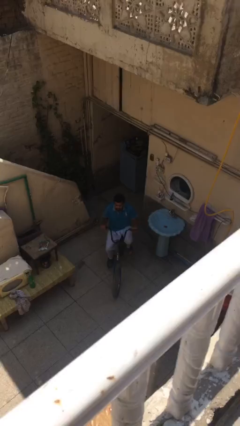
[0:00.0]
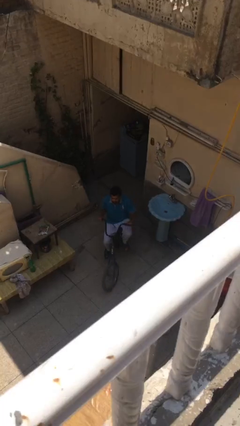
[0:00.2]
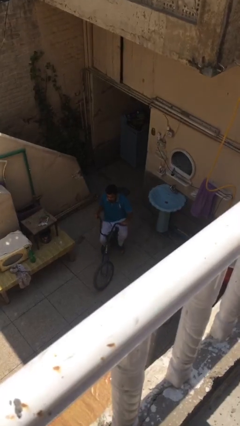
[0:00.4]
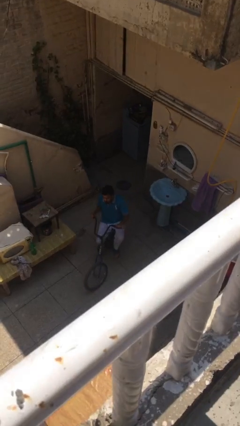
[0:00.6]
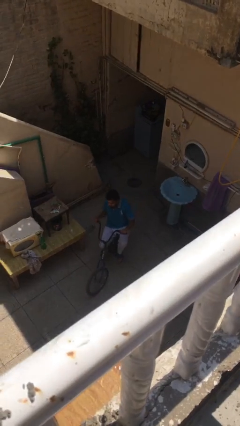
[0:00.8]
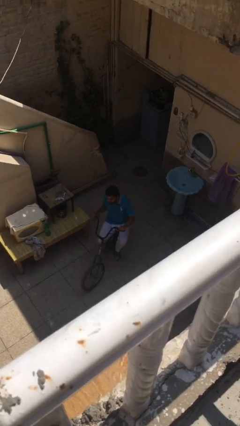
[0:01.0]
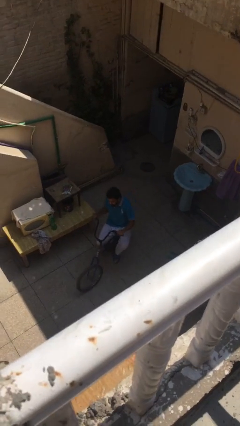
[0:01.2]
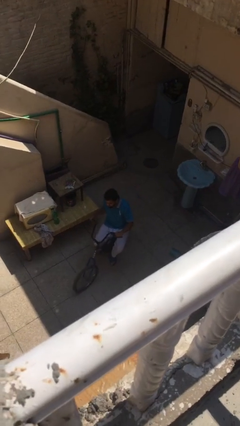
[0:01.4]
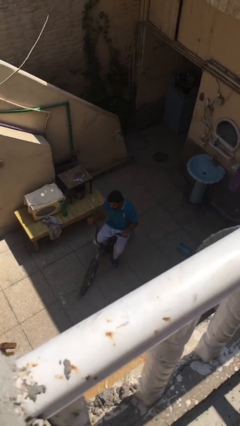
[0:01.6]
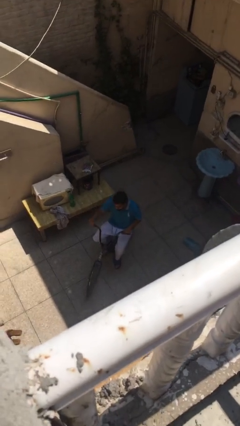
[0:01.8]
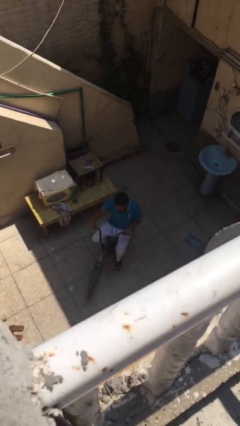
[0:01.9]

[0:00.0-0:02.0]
person rides bicycle

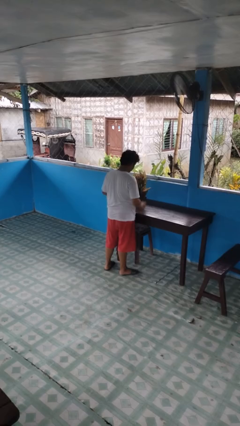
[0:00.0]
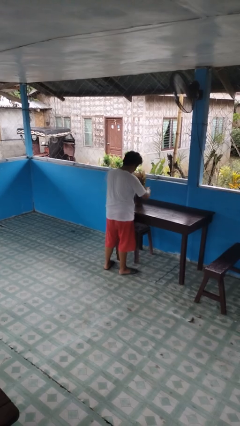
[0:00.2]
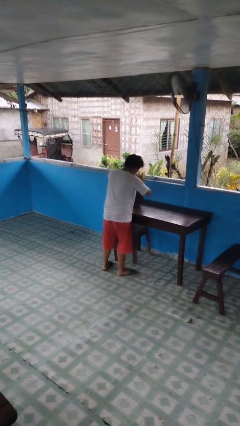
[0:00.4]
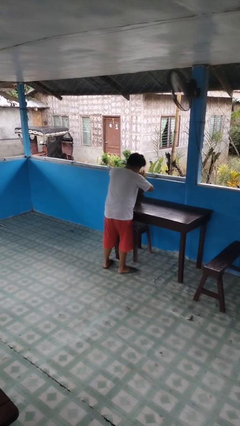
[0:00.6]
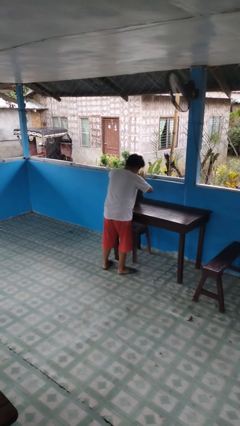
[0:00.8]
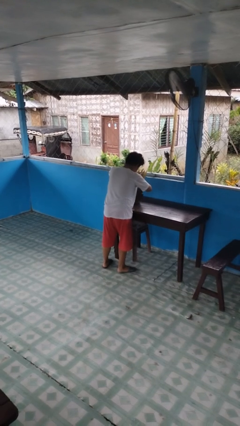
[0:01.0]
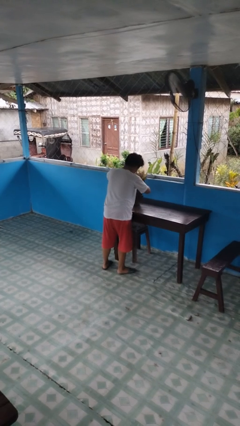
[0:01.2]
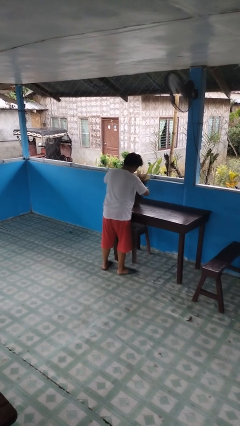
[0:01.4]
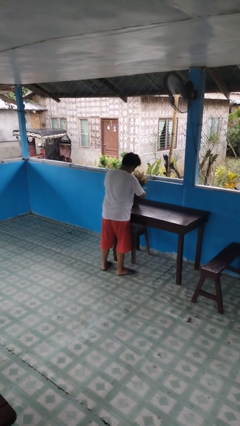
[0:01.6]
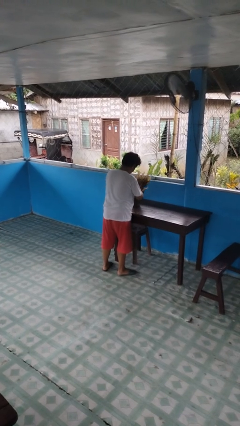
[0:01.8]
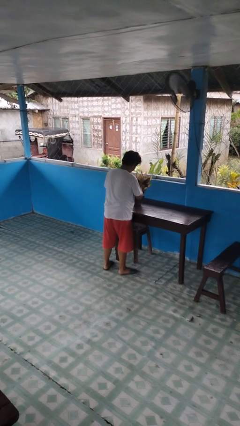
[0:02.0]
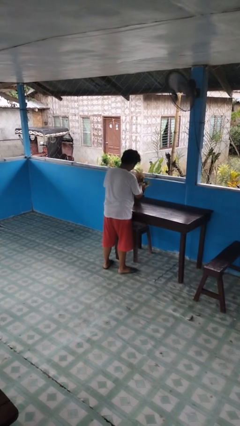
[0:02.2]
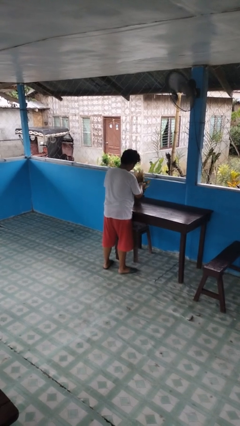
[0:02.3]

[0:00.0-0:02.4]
person arranges flowers in vase

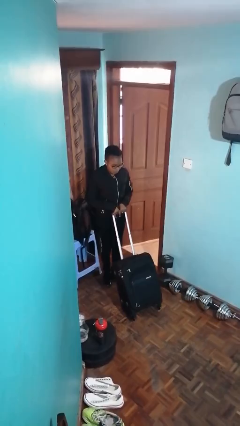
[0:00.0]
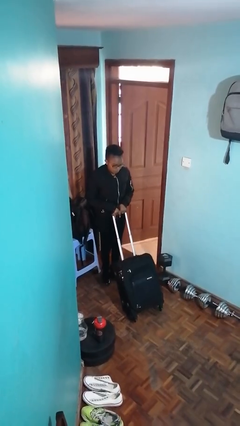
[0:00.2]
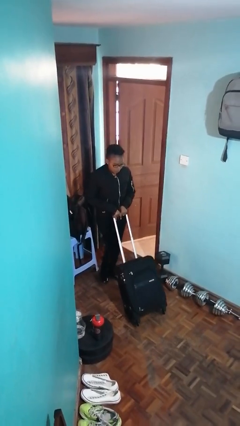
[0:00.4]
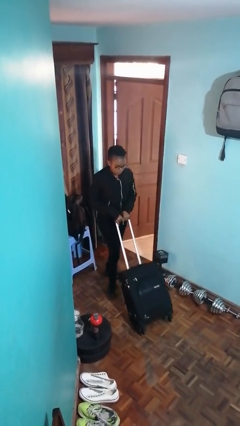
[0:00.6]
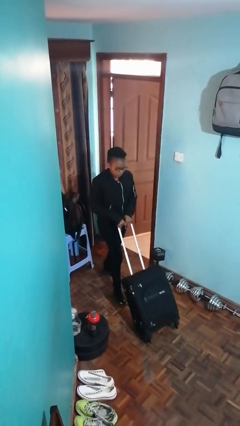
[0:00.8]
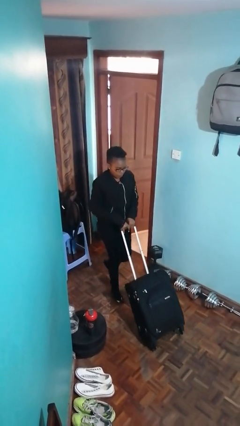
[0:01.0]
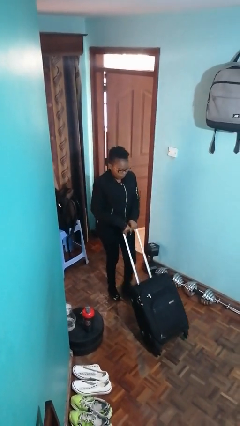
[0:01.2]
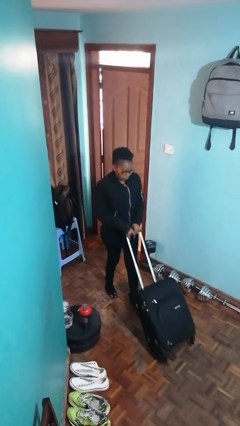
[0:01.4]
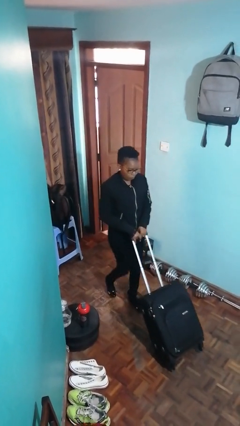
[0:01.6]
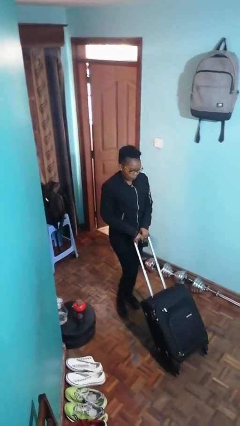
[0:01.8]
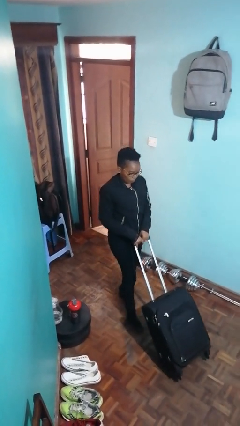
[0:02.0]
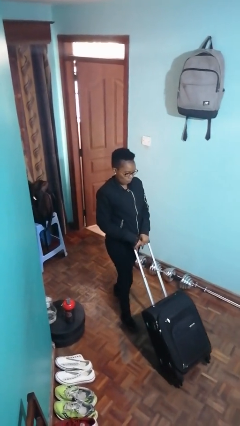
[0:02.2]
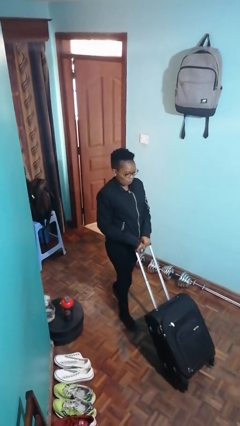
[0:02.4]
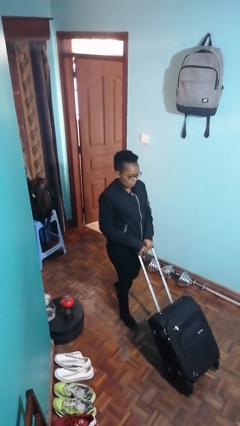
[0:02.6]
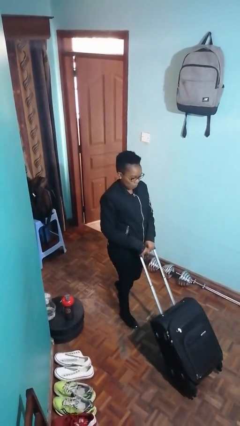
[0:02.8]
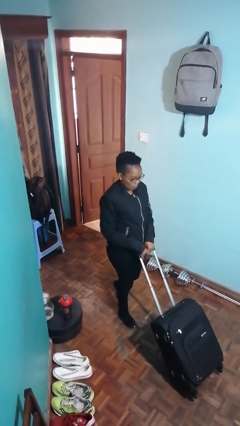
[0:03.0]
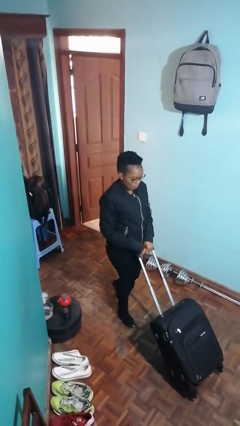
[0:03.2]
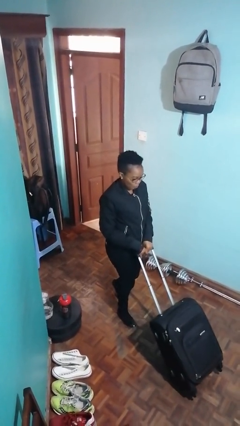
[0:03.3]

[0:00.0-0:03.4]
person pushes wheeled cart

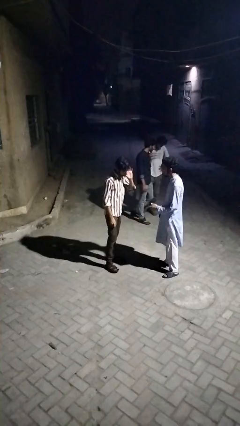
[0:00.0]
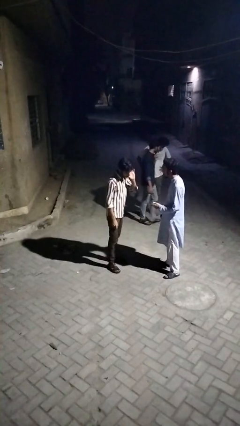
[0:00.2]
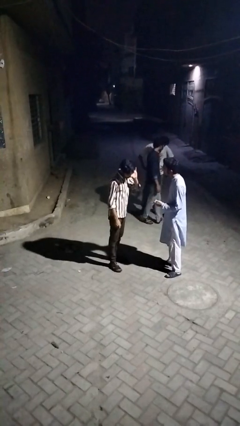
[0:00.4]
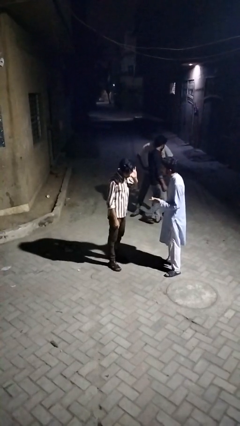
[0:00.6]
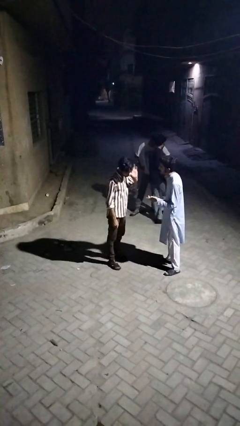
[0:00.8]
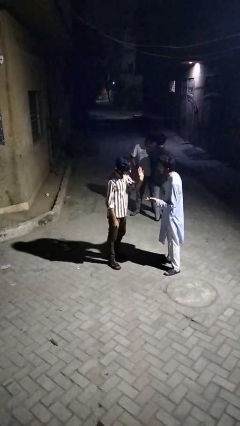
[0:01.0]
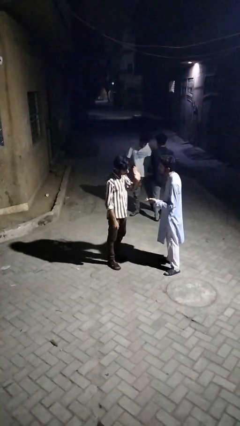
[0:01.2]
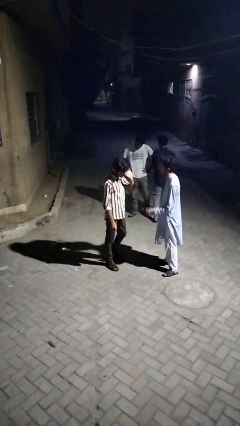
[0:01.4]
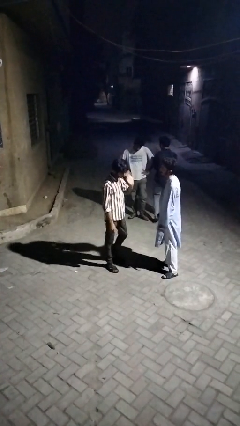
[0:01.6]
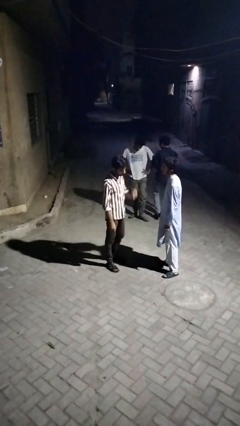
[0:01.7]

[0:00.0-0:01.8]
person talks to person

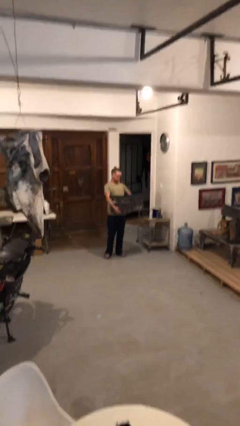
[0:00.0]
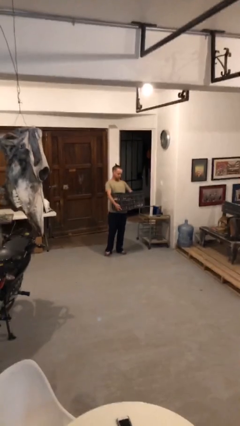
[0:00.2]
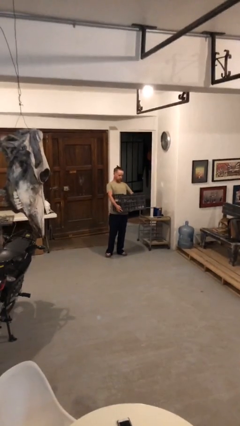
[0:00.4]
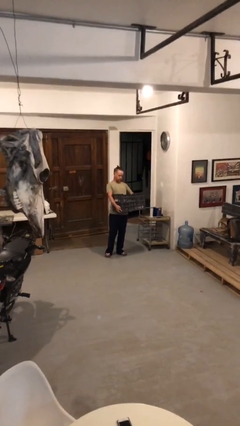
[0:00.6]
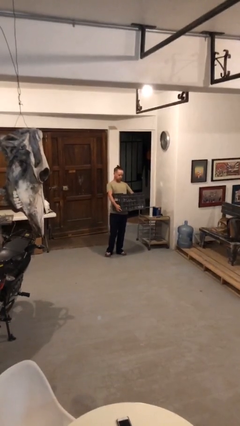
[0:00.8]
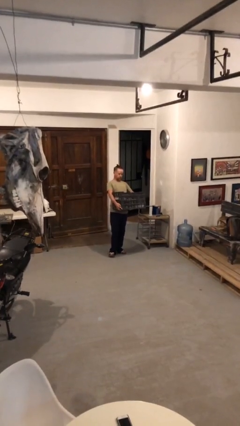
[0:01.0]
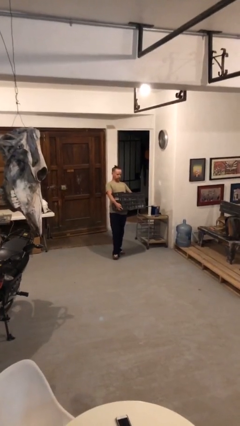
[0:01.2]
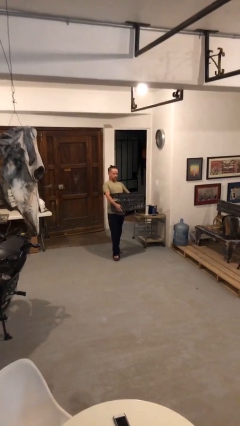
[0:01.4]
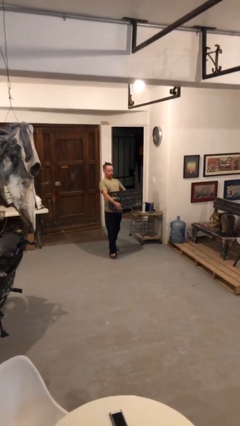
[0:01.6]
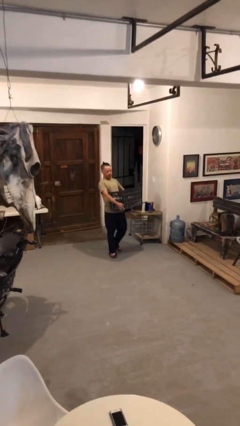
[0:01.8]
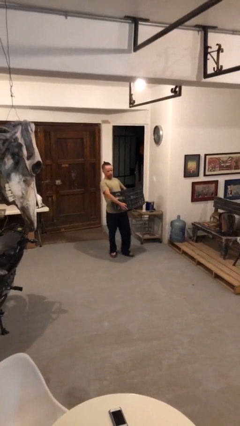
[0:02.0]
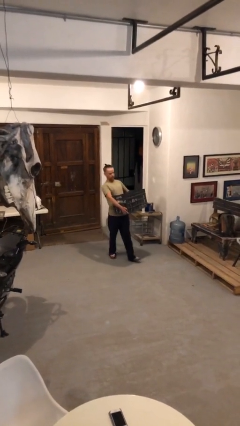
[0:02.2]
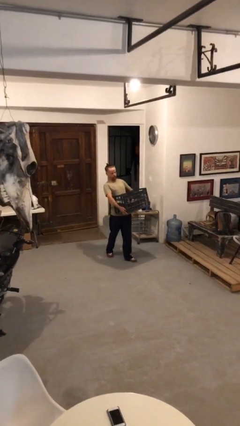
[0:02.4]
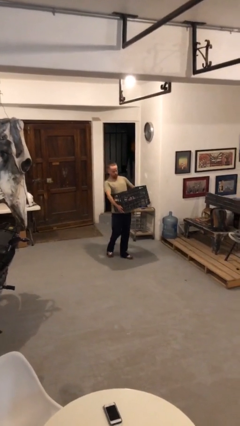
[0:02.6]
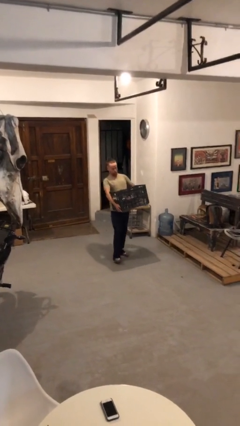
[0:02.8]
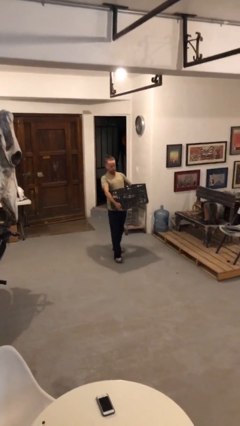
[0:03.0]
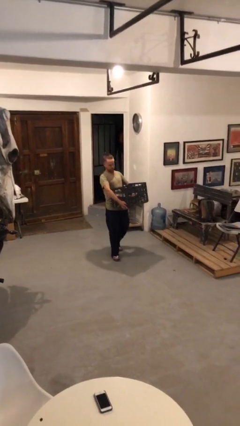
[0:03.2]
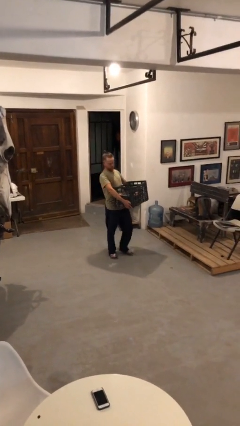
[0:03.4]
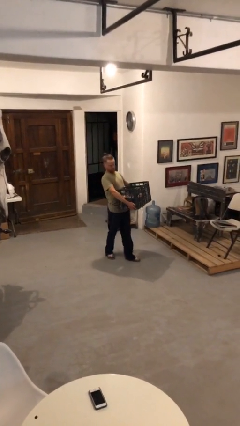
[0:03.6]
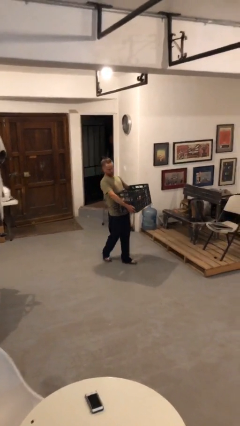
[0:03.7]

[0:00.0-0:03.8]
person carries heavy object

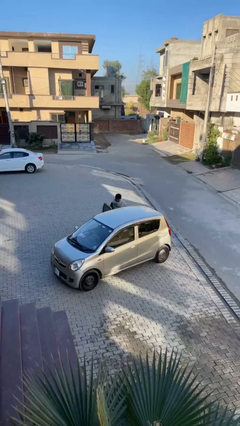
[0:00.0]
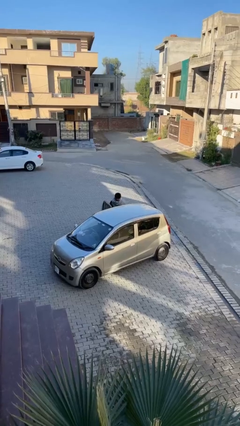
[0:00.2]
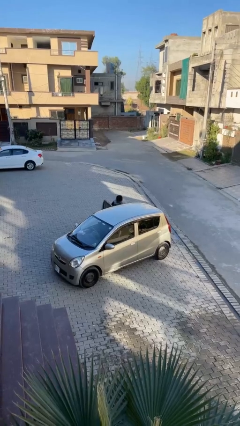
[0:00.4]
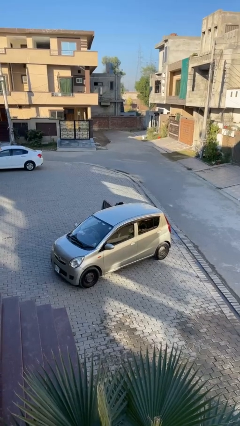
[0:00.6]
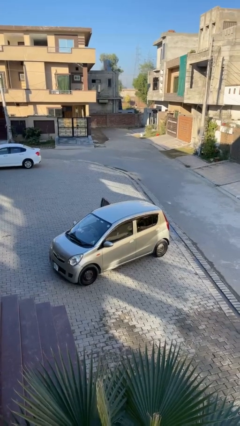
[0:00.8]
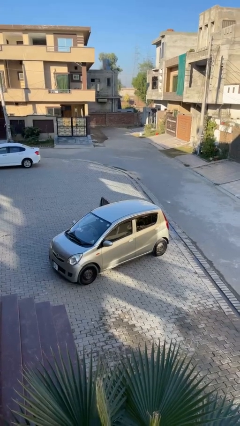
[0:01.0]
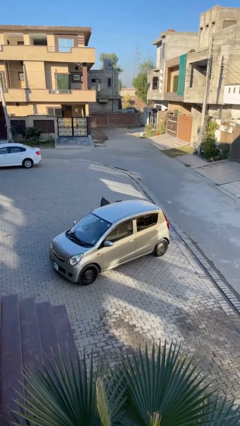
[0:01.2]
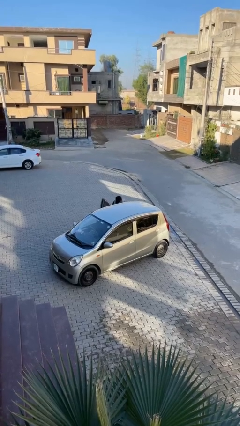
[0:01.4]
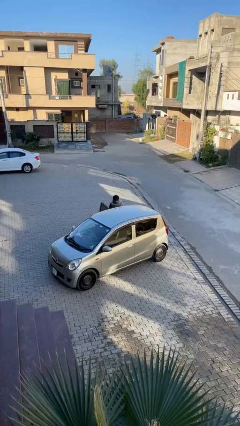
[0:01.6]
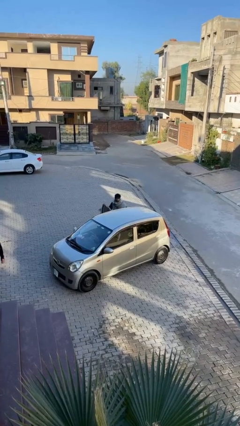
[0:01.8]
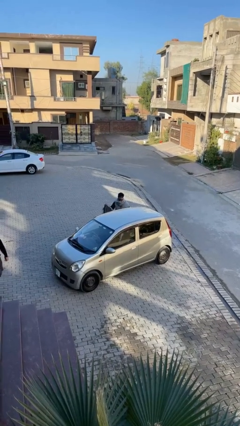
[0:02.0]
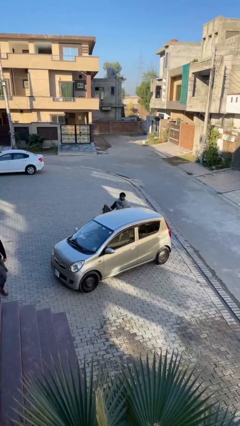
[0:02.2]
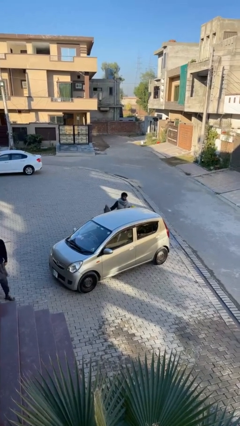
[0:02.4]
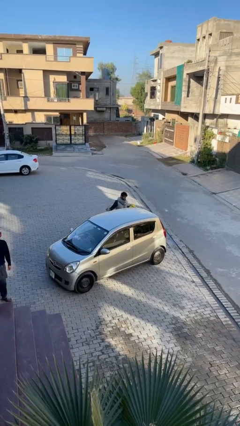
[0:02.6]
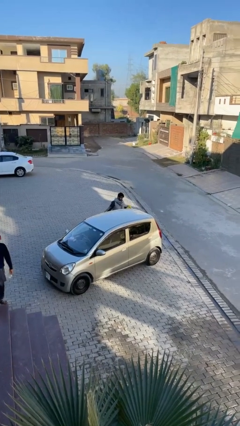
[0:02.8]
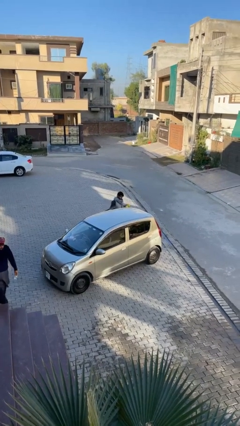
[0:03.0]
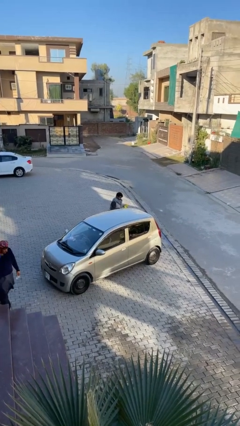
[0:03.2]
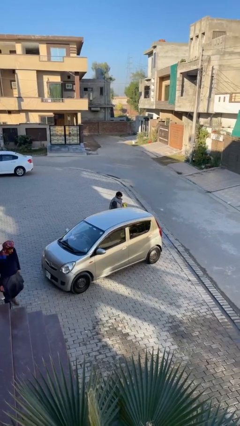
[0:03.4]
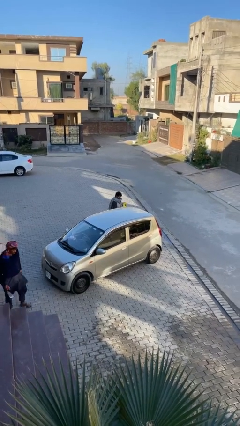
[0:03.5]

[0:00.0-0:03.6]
person unloads car

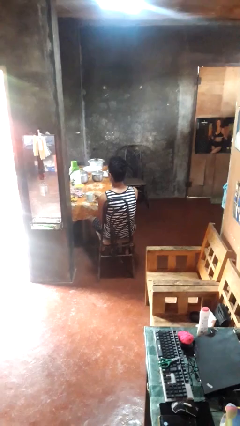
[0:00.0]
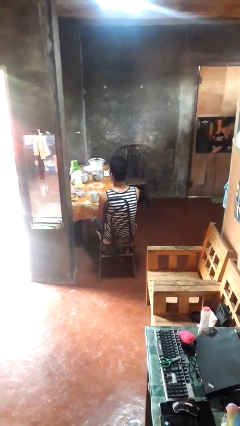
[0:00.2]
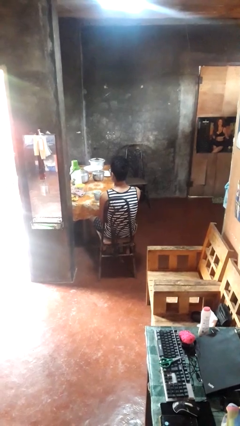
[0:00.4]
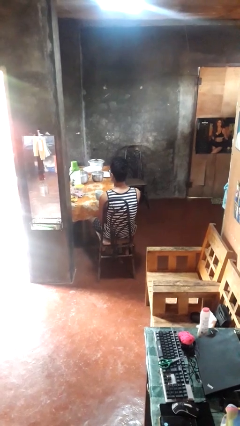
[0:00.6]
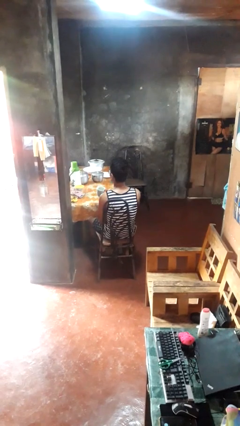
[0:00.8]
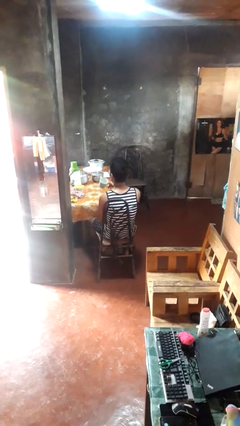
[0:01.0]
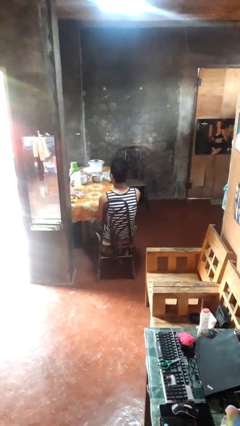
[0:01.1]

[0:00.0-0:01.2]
person picks up object from table
